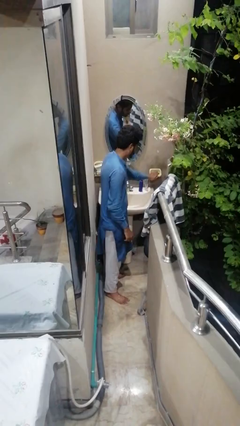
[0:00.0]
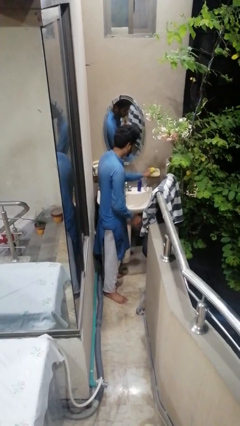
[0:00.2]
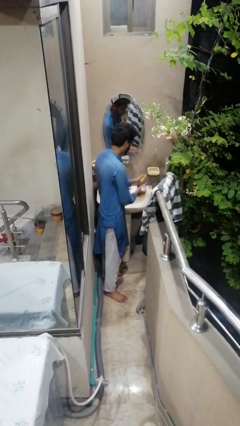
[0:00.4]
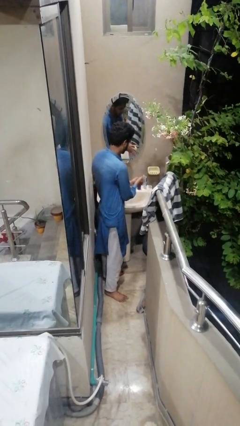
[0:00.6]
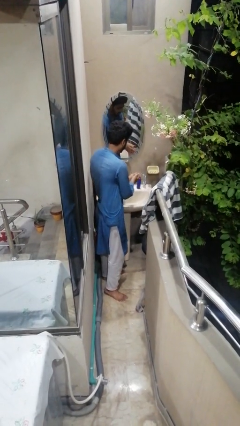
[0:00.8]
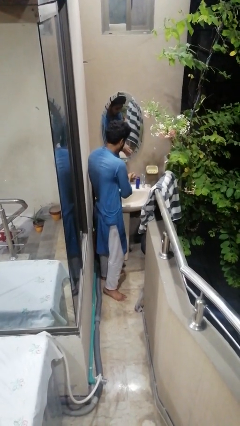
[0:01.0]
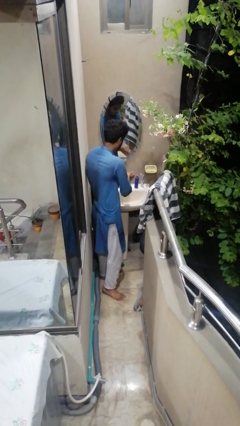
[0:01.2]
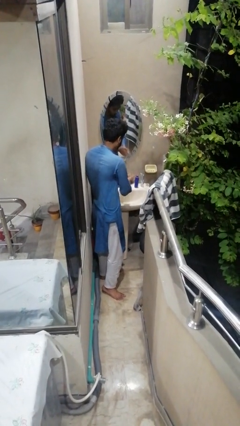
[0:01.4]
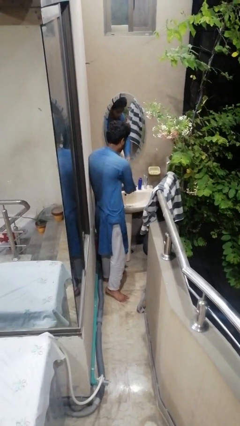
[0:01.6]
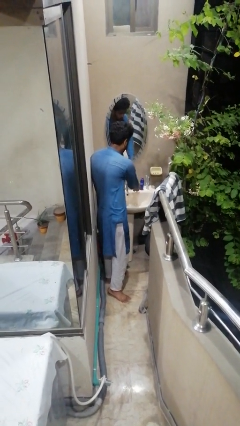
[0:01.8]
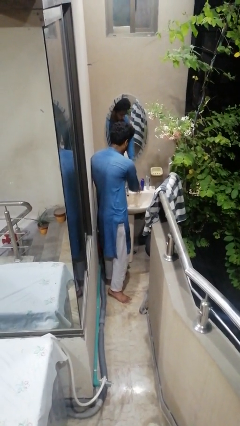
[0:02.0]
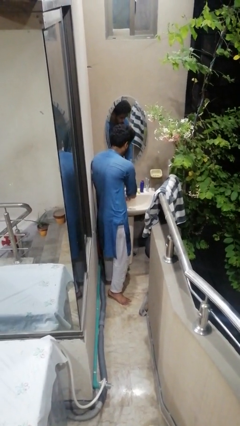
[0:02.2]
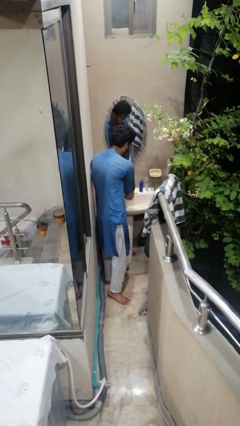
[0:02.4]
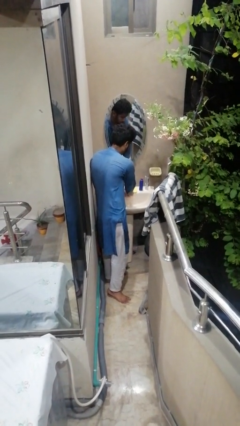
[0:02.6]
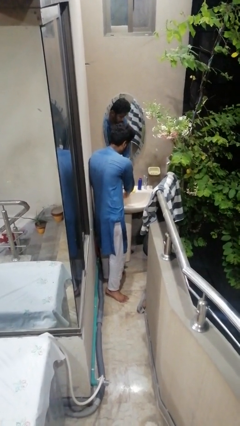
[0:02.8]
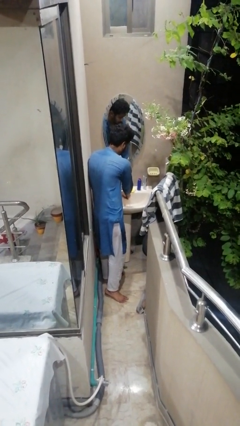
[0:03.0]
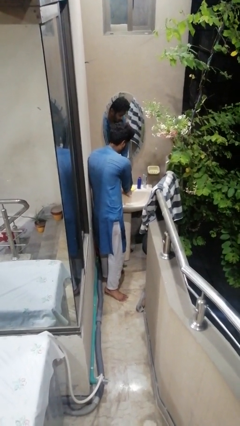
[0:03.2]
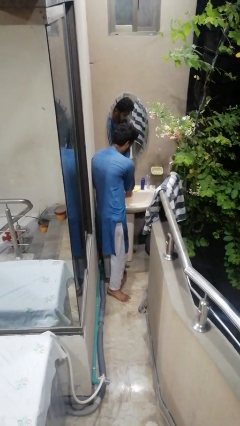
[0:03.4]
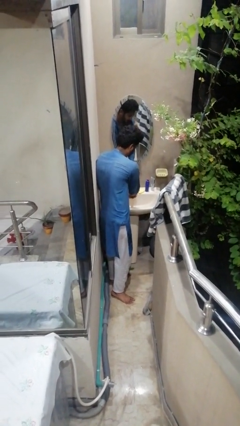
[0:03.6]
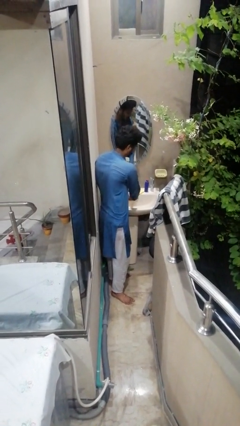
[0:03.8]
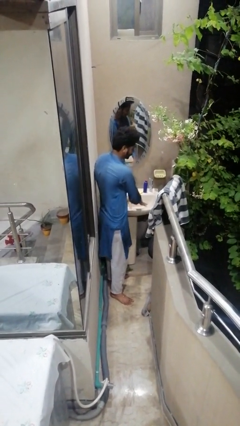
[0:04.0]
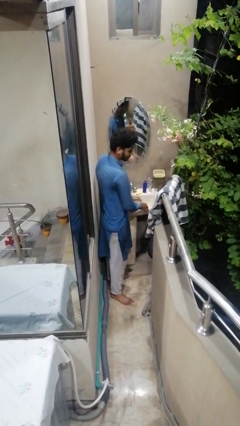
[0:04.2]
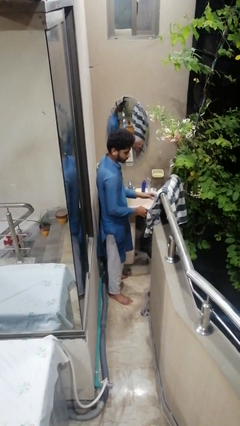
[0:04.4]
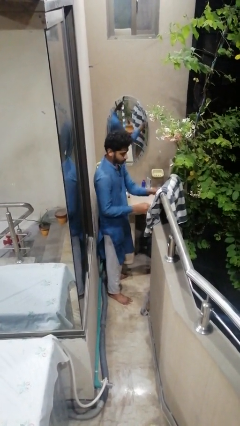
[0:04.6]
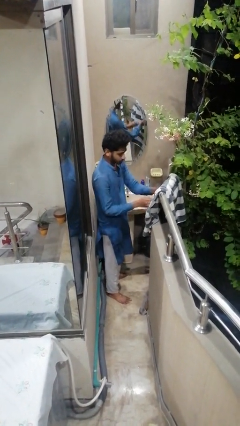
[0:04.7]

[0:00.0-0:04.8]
person washes hands

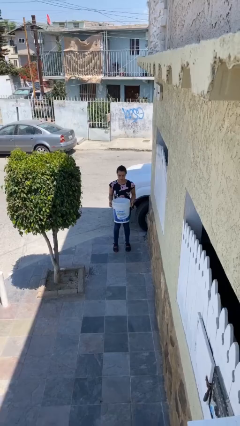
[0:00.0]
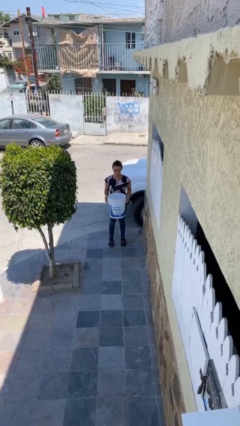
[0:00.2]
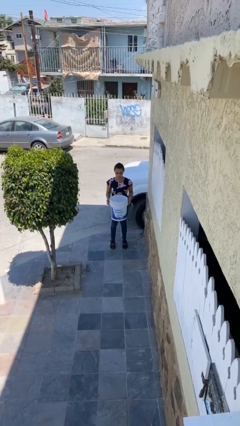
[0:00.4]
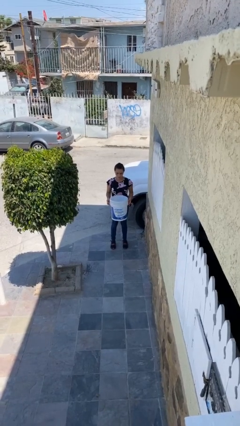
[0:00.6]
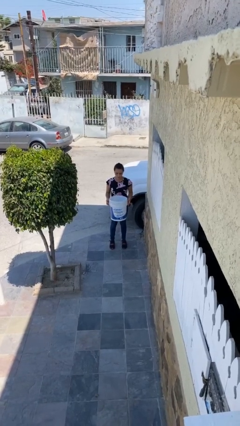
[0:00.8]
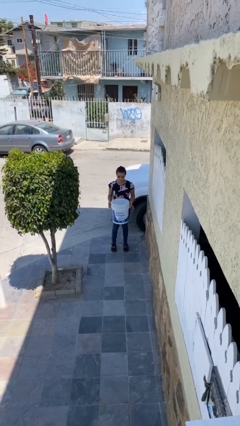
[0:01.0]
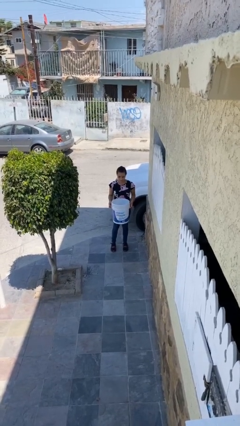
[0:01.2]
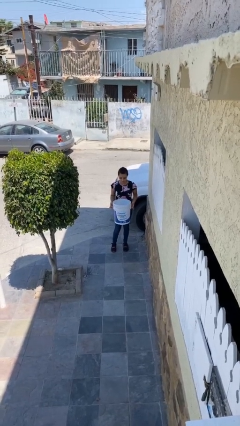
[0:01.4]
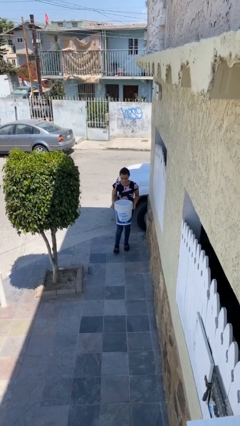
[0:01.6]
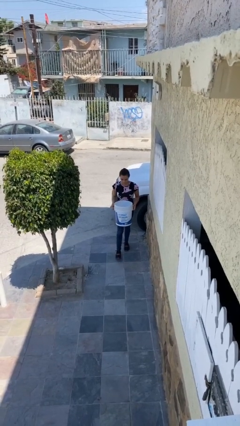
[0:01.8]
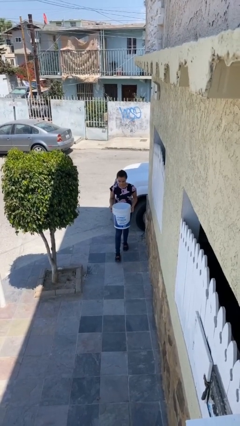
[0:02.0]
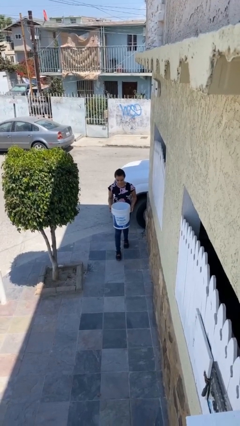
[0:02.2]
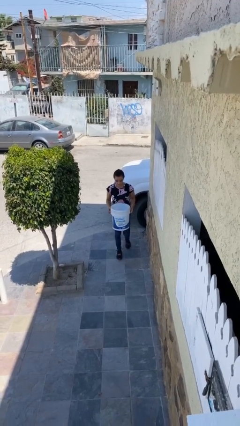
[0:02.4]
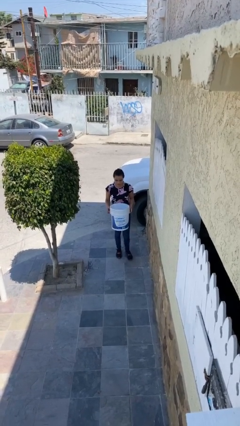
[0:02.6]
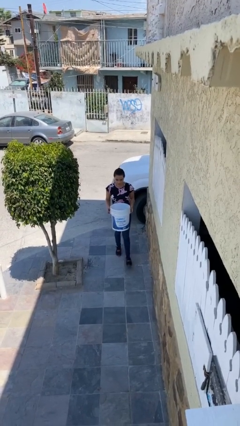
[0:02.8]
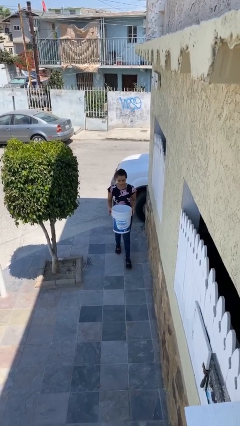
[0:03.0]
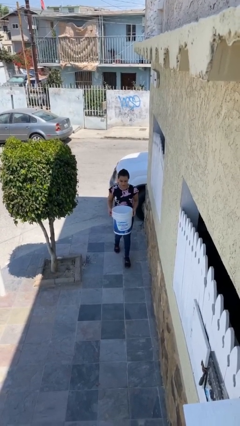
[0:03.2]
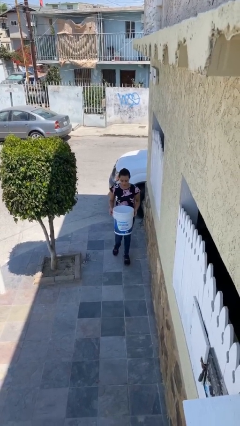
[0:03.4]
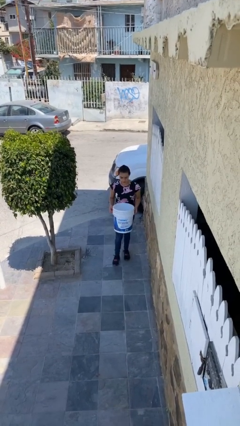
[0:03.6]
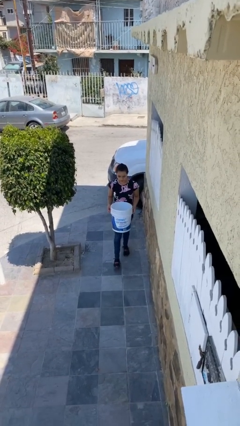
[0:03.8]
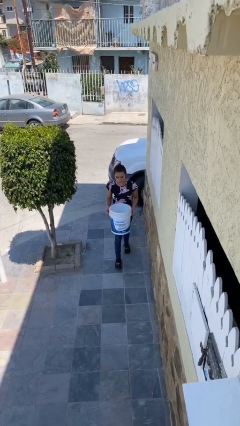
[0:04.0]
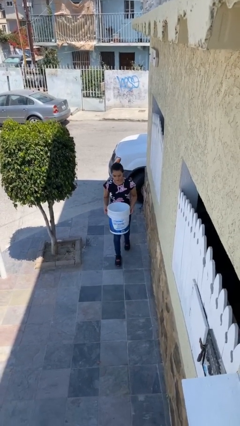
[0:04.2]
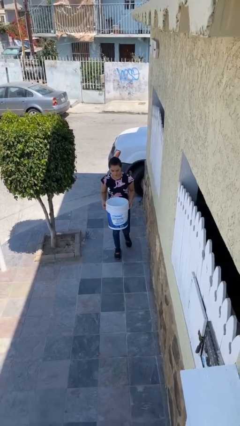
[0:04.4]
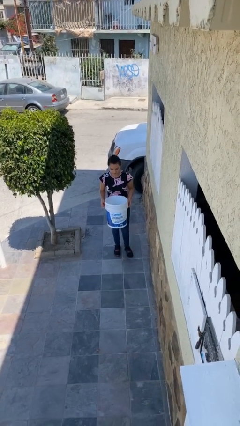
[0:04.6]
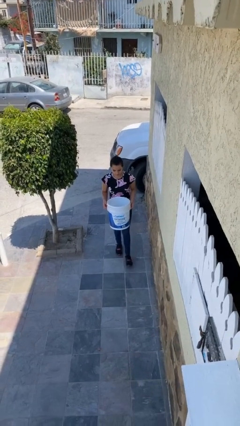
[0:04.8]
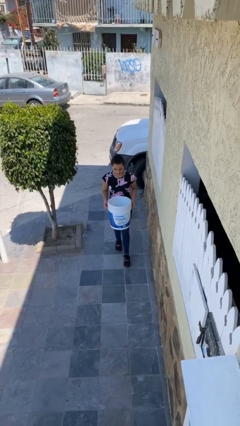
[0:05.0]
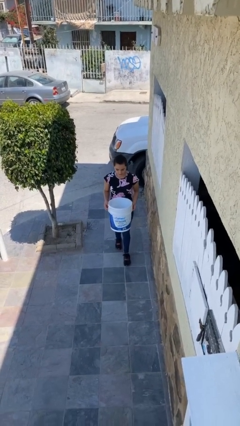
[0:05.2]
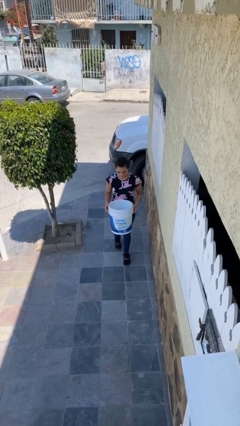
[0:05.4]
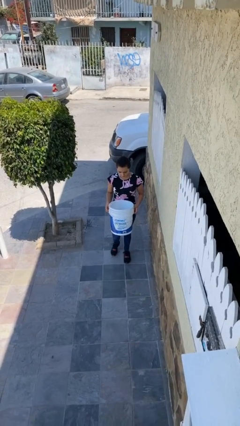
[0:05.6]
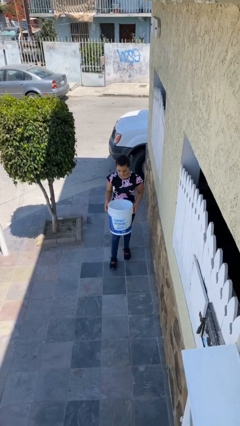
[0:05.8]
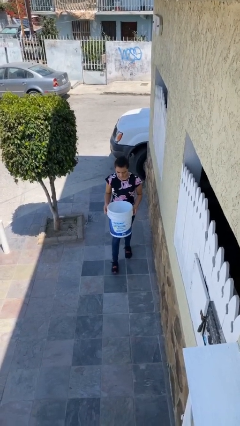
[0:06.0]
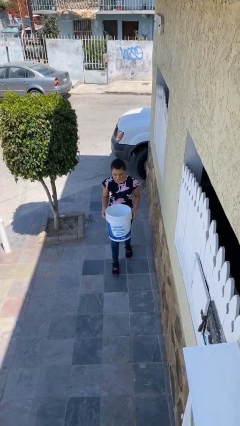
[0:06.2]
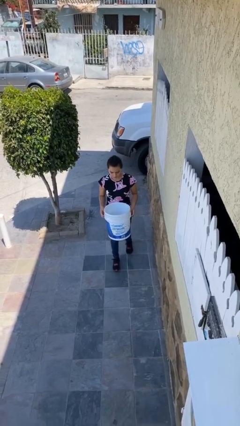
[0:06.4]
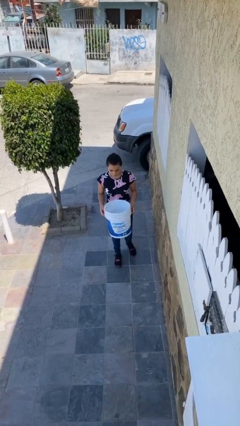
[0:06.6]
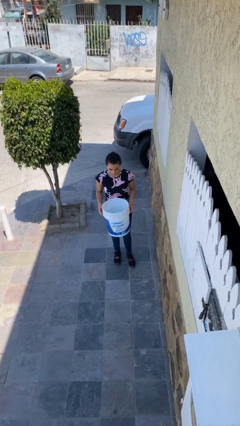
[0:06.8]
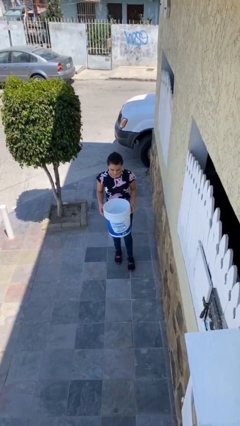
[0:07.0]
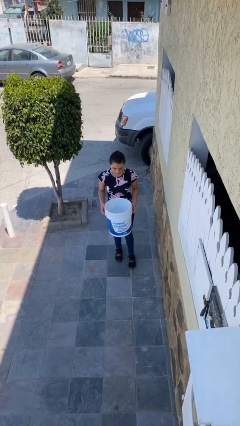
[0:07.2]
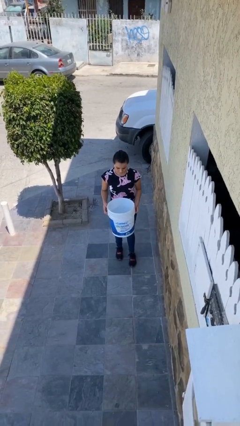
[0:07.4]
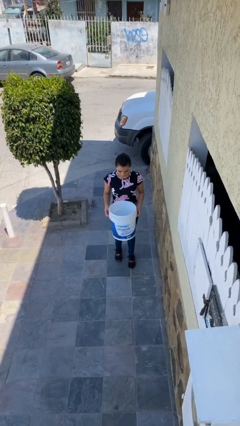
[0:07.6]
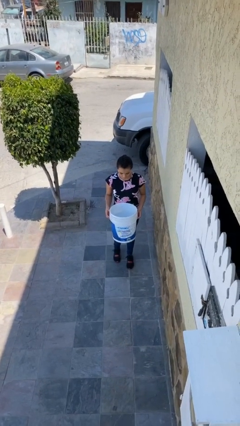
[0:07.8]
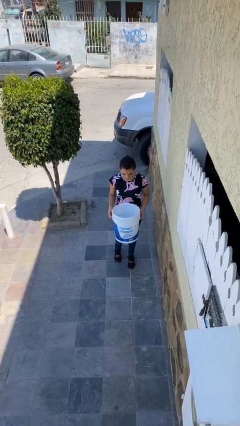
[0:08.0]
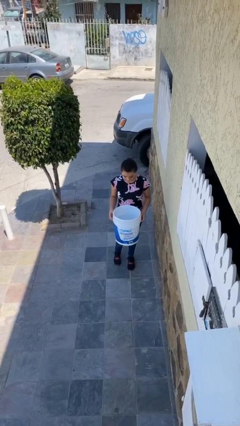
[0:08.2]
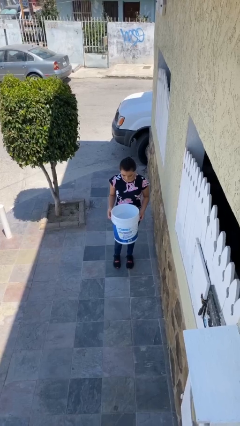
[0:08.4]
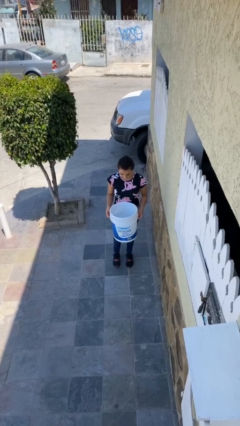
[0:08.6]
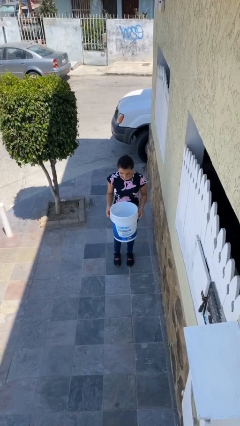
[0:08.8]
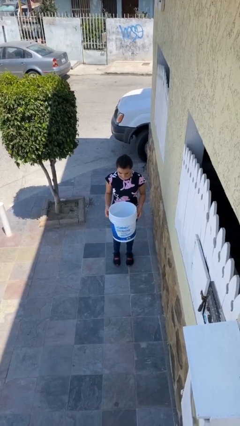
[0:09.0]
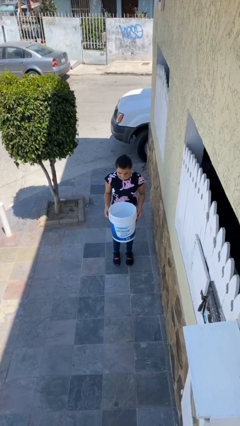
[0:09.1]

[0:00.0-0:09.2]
person carries heavy object

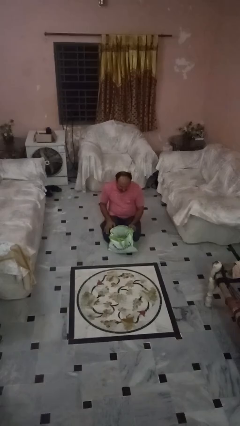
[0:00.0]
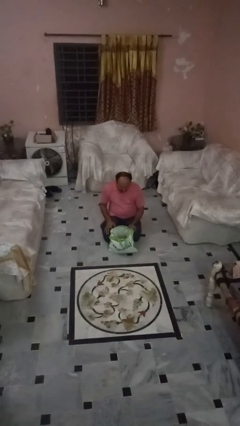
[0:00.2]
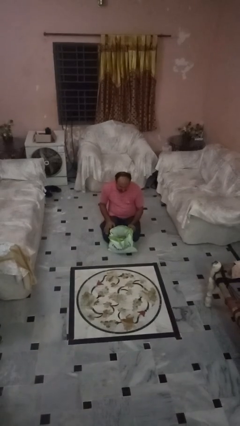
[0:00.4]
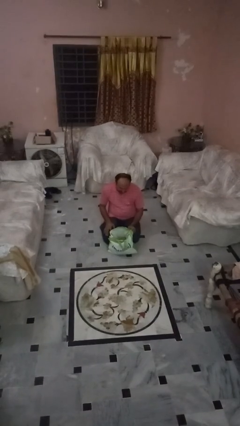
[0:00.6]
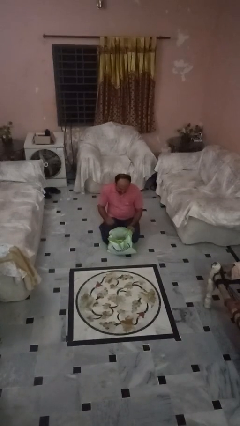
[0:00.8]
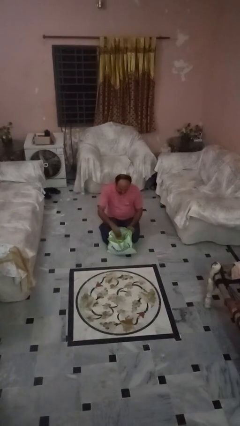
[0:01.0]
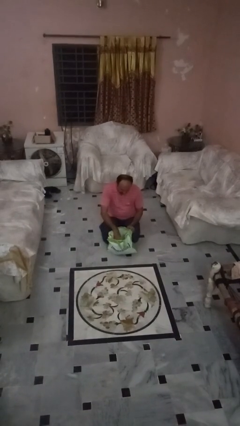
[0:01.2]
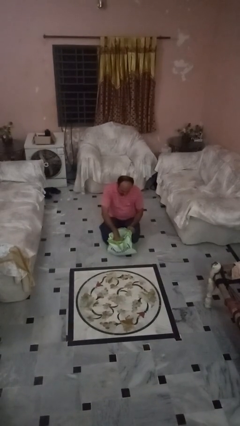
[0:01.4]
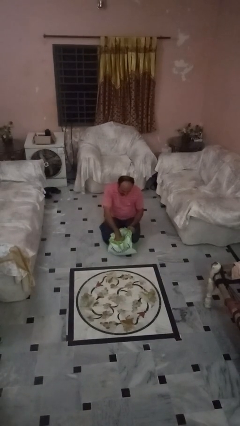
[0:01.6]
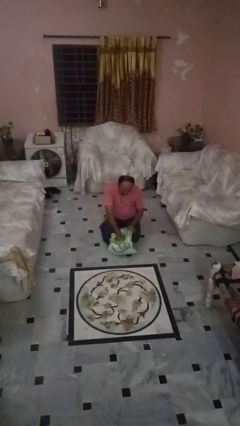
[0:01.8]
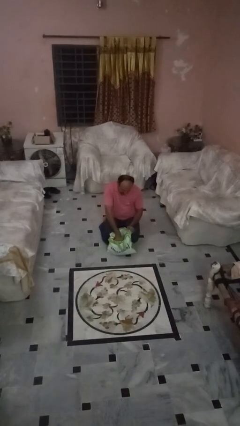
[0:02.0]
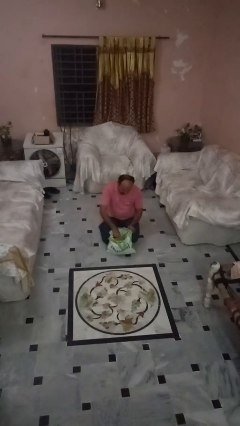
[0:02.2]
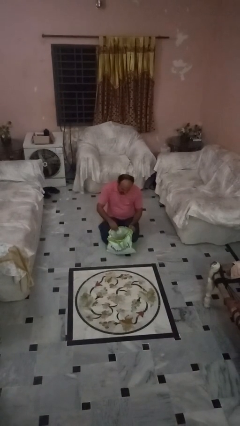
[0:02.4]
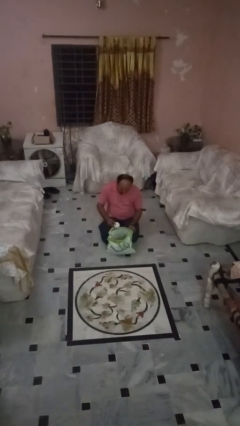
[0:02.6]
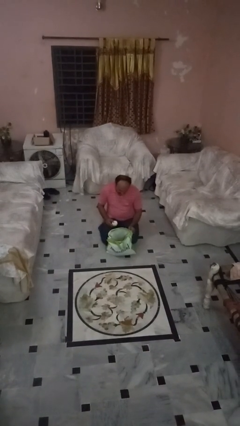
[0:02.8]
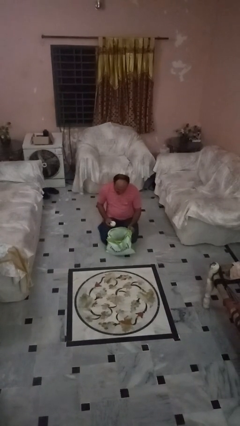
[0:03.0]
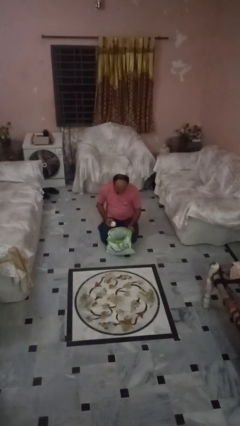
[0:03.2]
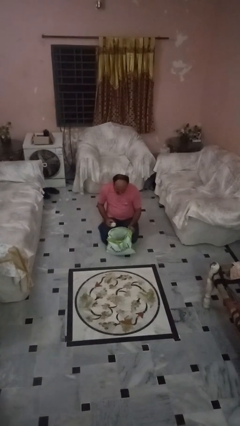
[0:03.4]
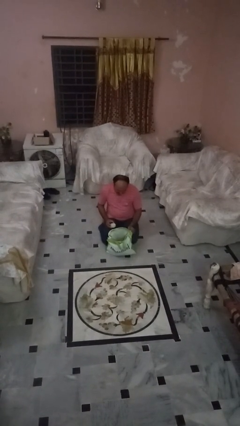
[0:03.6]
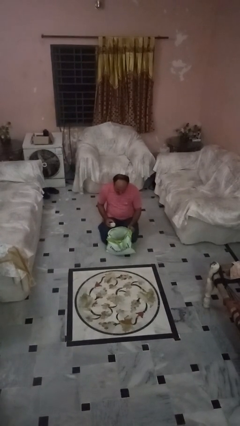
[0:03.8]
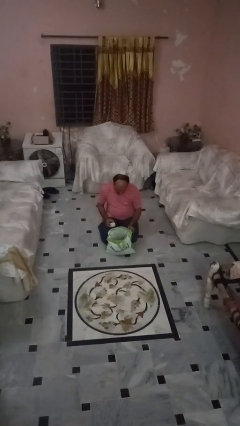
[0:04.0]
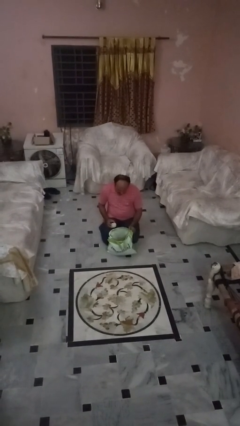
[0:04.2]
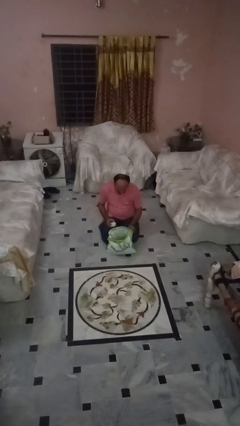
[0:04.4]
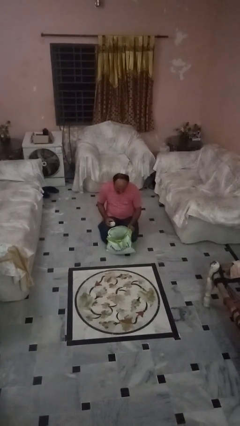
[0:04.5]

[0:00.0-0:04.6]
person takes object from bag
